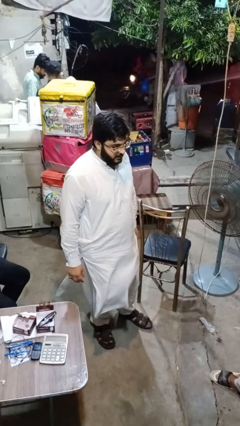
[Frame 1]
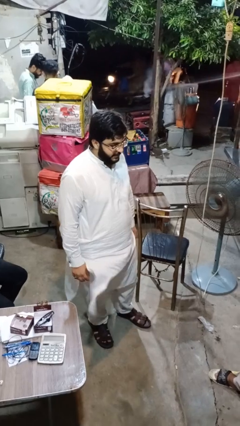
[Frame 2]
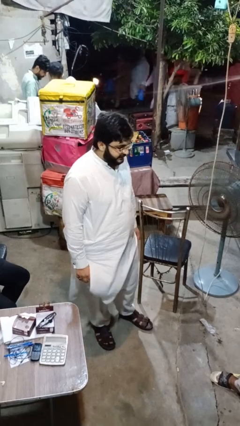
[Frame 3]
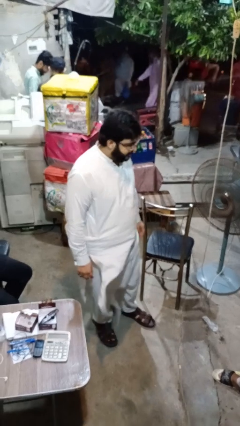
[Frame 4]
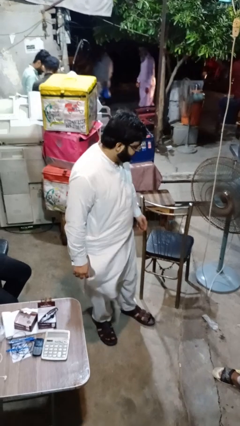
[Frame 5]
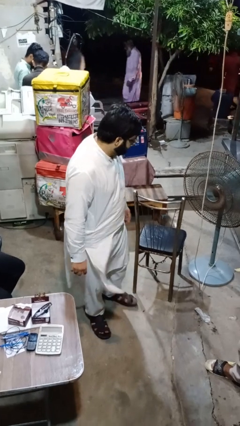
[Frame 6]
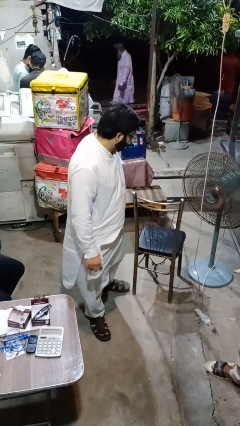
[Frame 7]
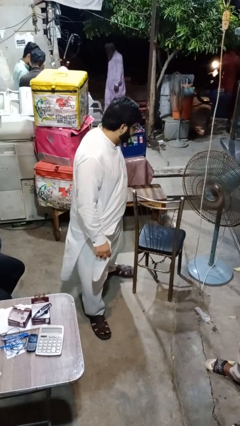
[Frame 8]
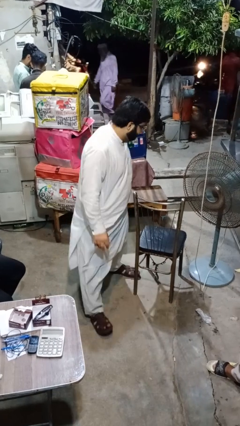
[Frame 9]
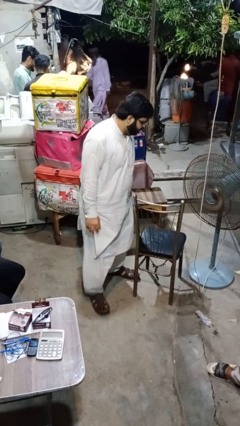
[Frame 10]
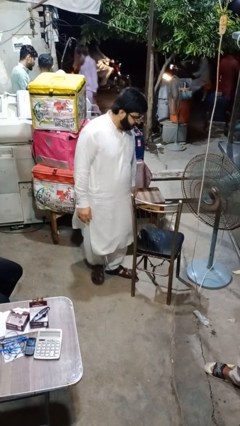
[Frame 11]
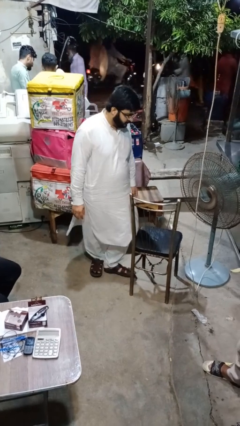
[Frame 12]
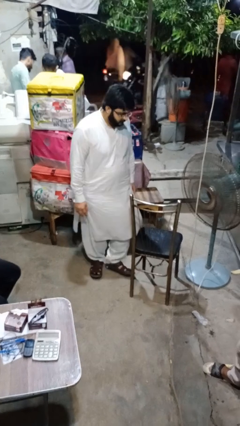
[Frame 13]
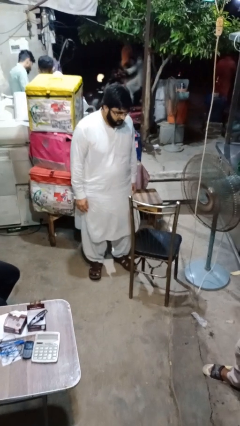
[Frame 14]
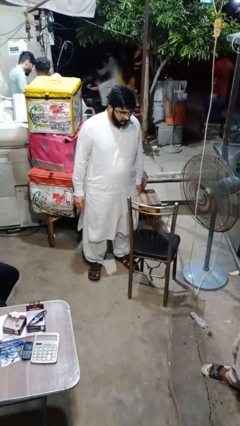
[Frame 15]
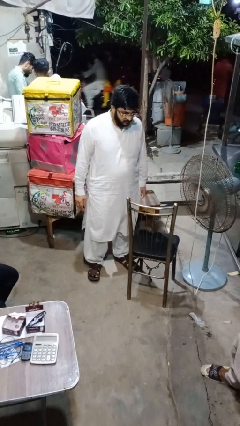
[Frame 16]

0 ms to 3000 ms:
person trips on object on floor

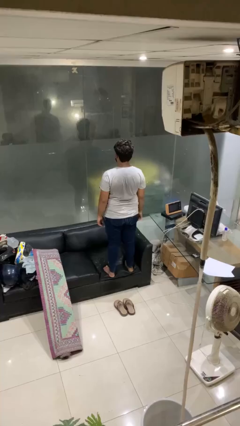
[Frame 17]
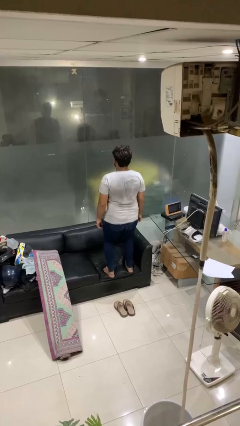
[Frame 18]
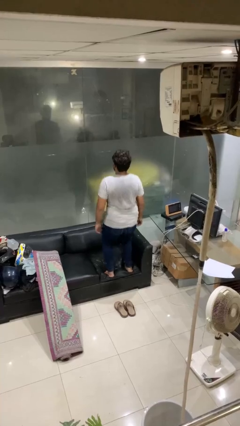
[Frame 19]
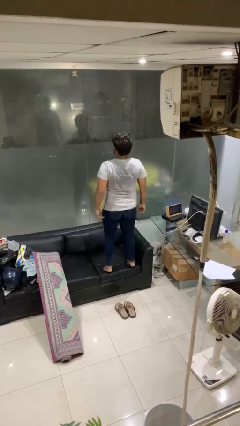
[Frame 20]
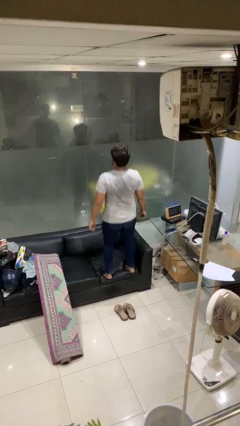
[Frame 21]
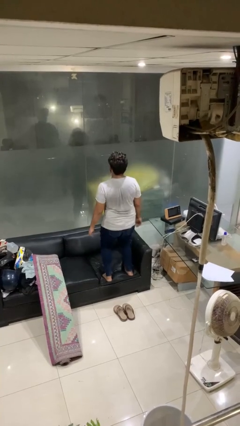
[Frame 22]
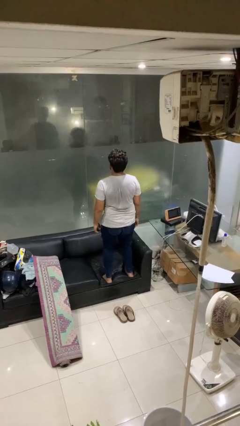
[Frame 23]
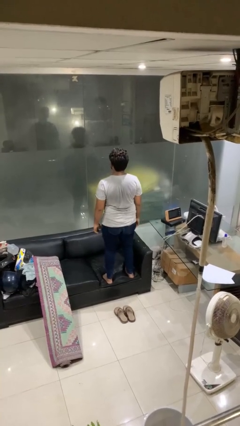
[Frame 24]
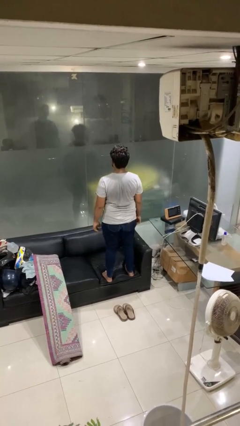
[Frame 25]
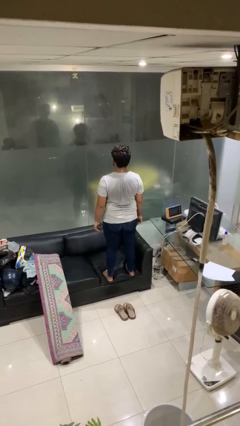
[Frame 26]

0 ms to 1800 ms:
person jumps on couch

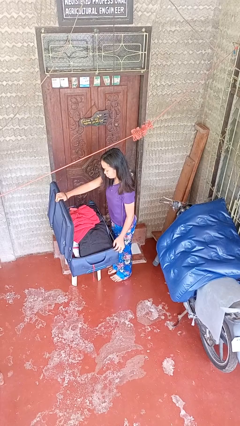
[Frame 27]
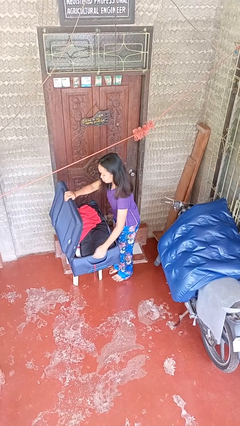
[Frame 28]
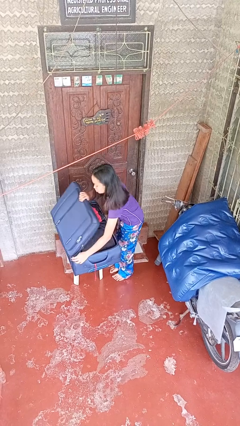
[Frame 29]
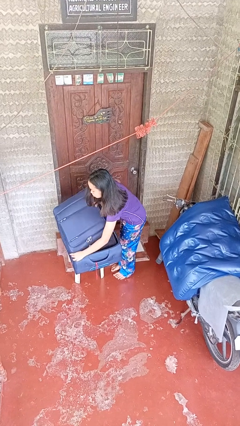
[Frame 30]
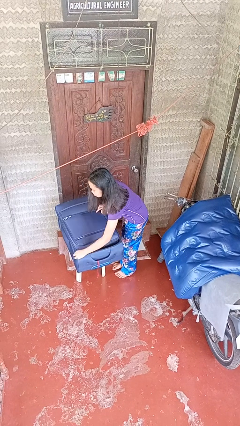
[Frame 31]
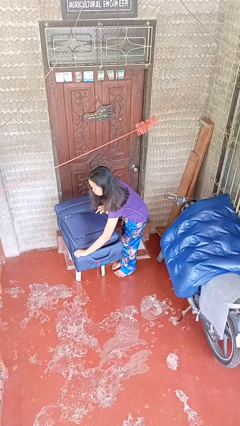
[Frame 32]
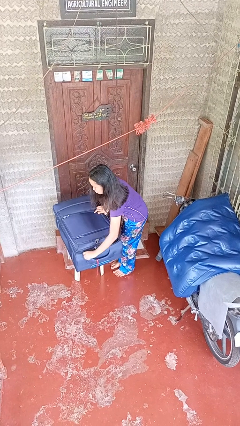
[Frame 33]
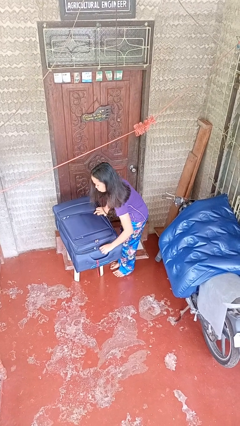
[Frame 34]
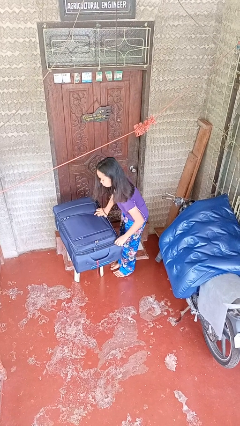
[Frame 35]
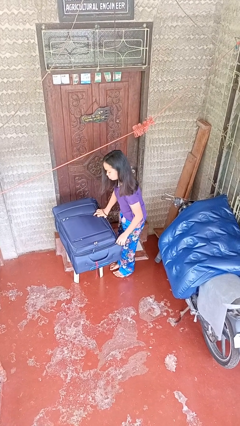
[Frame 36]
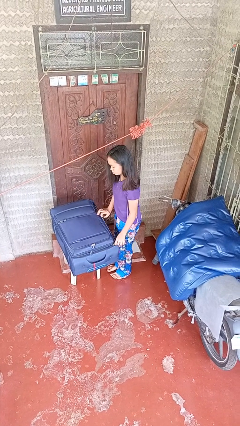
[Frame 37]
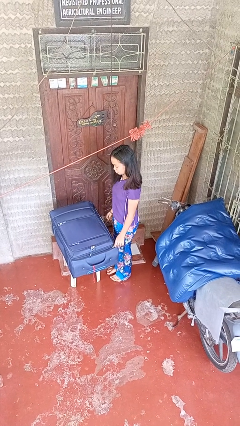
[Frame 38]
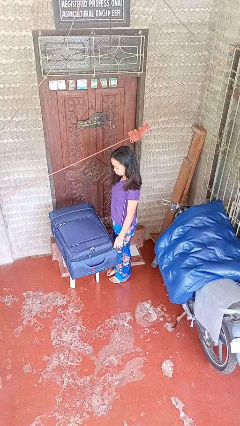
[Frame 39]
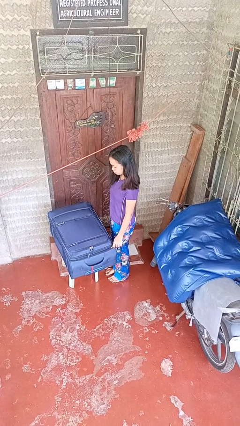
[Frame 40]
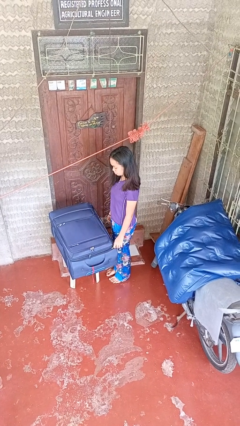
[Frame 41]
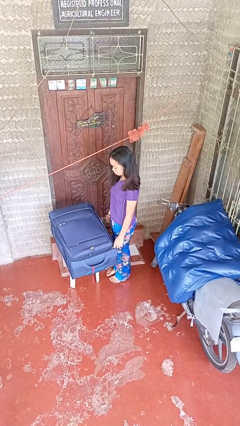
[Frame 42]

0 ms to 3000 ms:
person closes suitcase

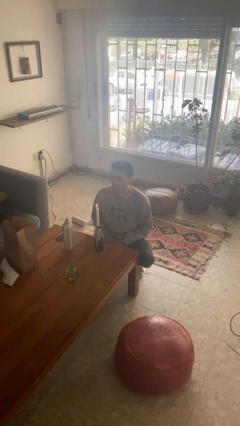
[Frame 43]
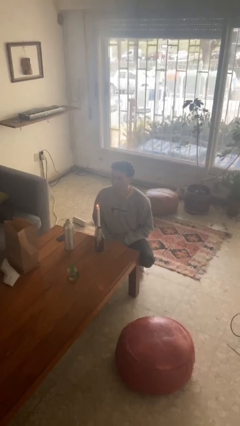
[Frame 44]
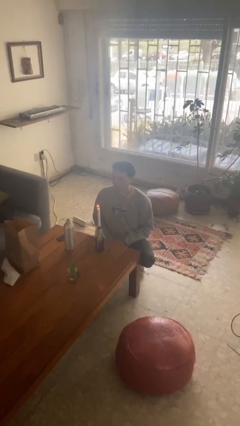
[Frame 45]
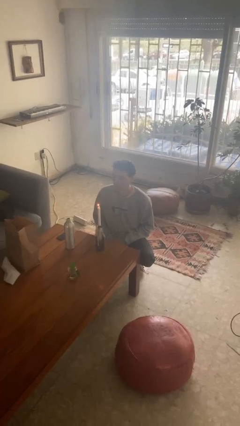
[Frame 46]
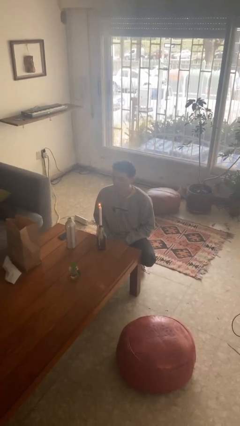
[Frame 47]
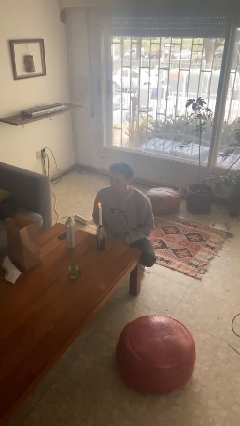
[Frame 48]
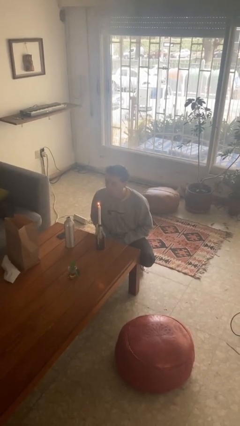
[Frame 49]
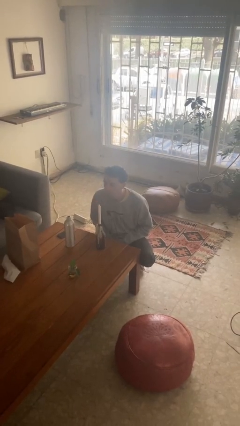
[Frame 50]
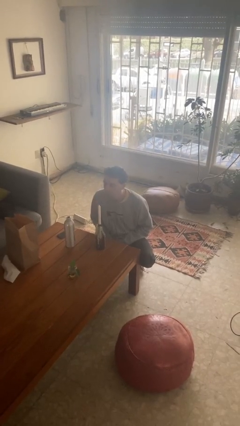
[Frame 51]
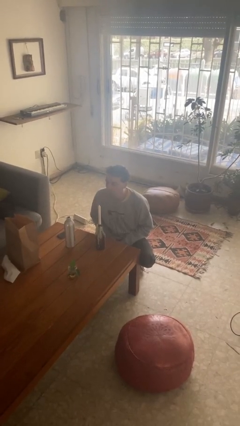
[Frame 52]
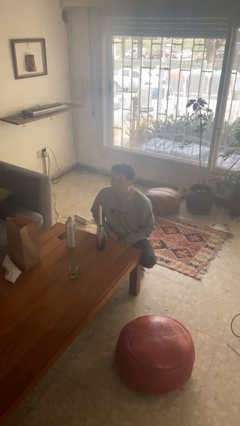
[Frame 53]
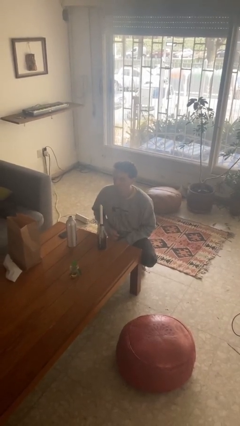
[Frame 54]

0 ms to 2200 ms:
person extinguishes candle

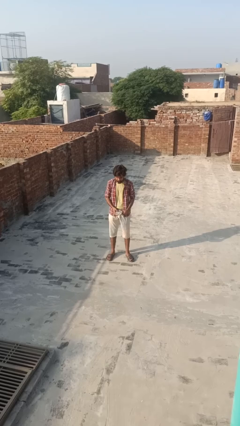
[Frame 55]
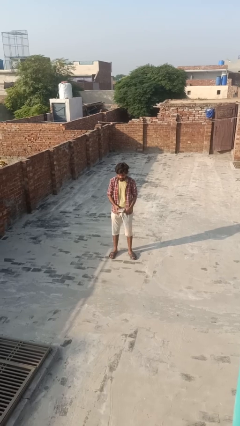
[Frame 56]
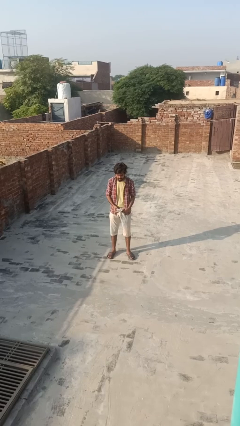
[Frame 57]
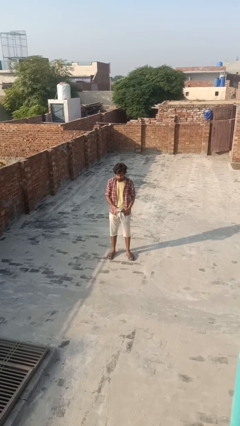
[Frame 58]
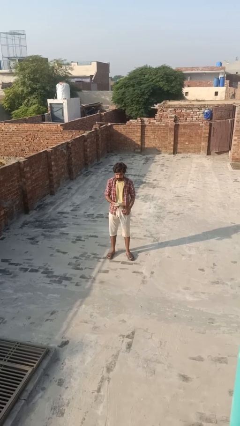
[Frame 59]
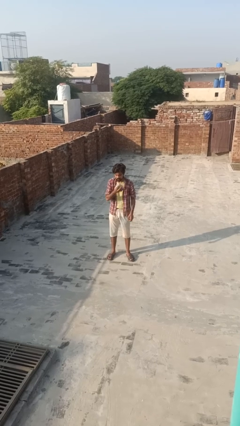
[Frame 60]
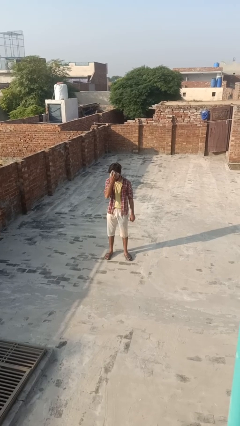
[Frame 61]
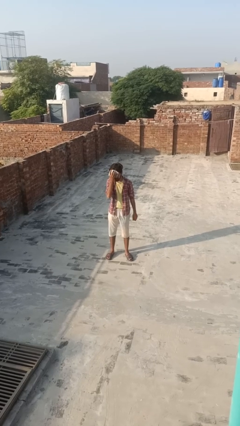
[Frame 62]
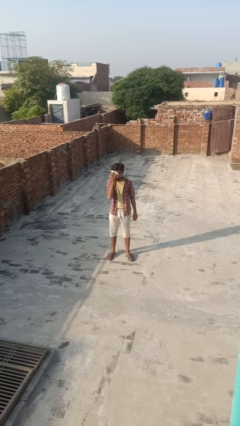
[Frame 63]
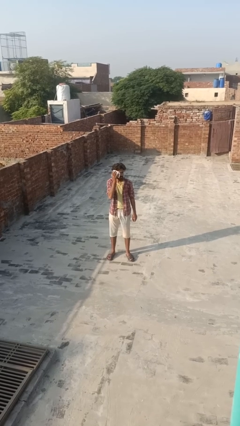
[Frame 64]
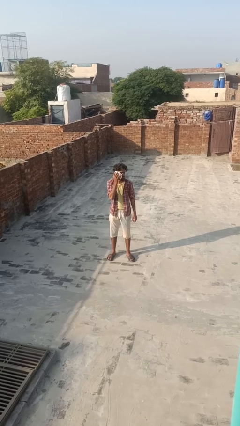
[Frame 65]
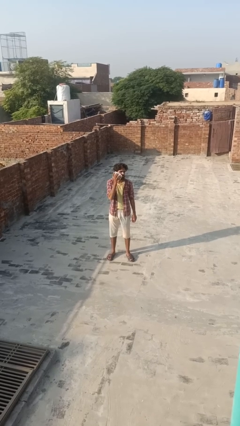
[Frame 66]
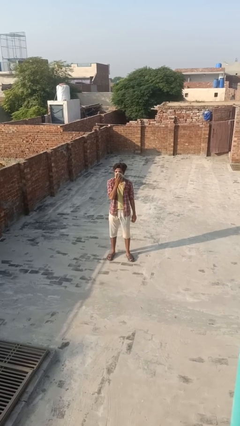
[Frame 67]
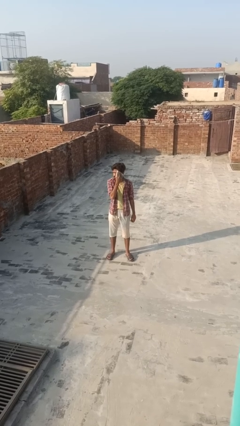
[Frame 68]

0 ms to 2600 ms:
person wipes mouth with napkin

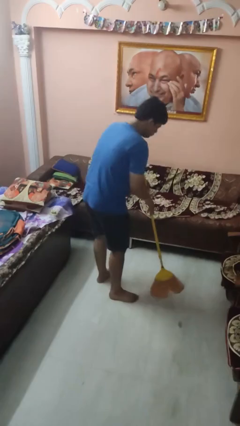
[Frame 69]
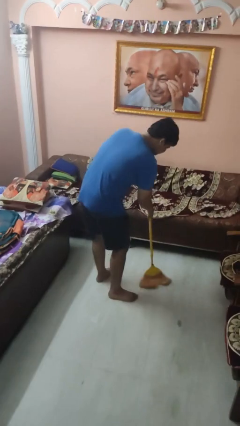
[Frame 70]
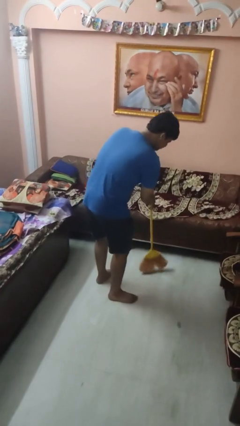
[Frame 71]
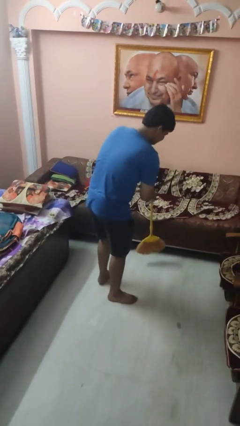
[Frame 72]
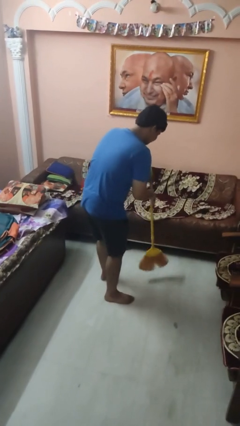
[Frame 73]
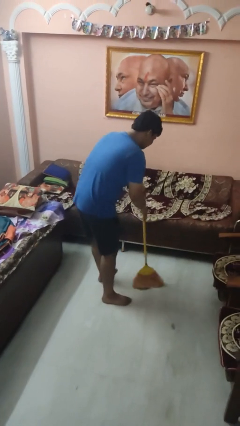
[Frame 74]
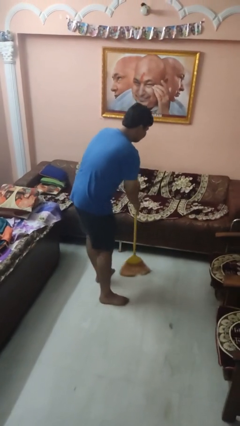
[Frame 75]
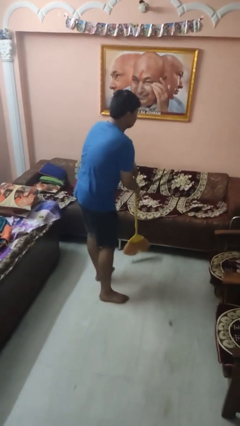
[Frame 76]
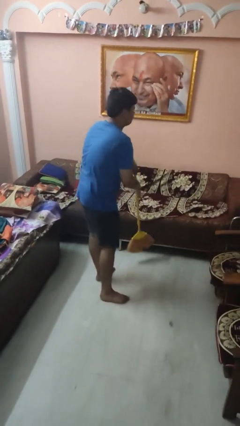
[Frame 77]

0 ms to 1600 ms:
person sweeps floor

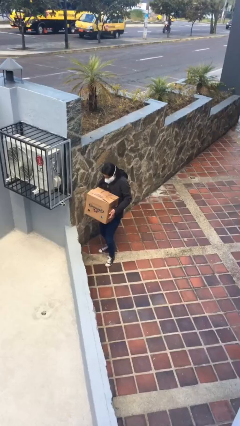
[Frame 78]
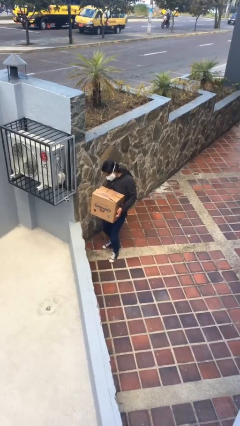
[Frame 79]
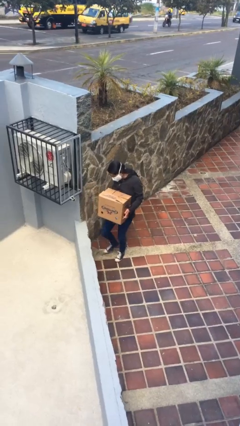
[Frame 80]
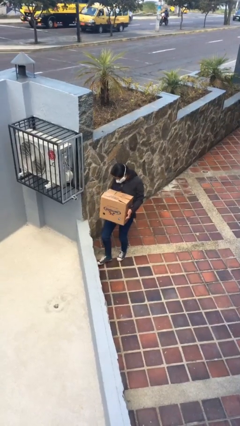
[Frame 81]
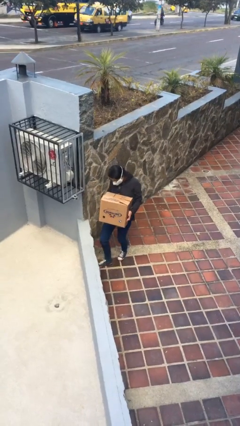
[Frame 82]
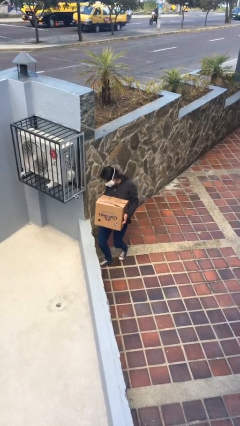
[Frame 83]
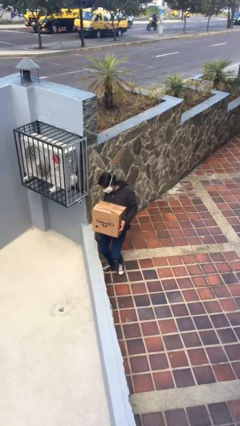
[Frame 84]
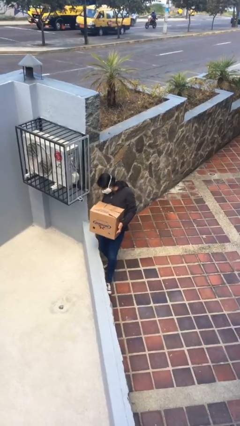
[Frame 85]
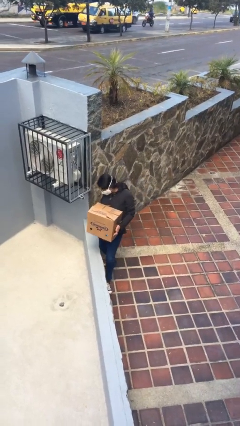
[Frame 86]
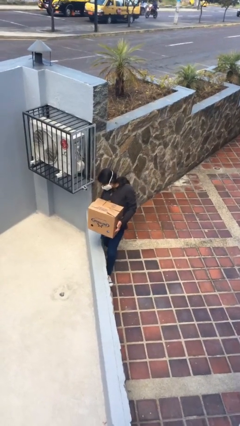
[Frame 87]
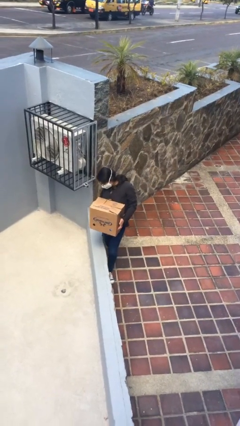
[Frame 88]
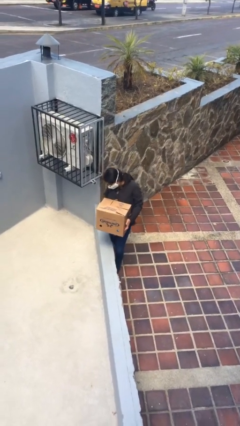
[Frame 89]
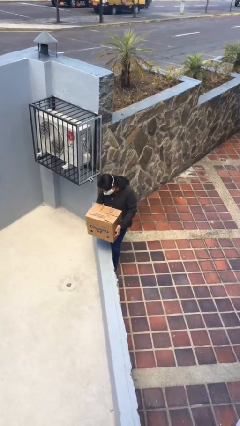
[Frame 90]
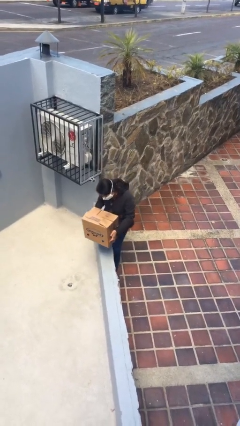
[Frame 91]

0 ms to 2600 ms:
person carries heavy object
